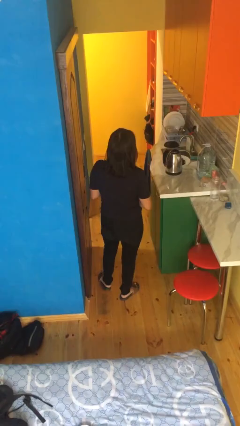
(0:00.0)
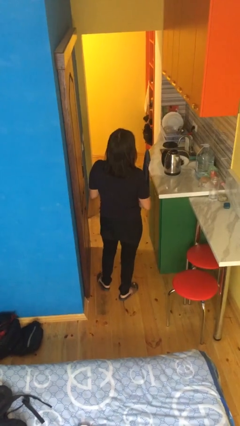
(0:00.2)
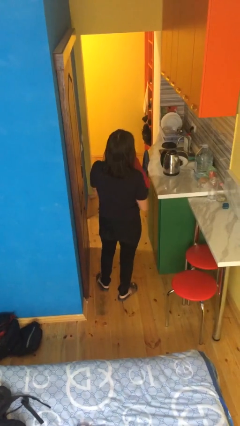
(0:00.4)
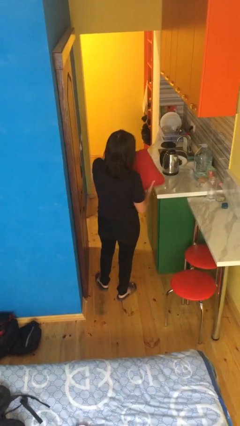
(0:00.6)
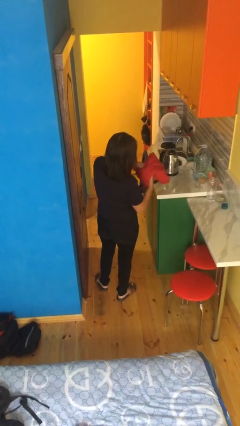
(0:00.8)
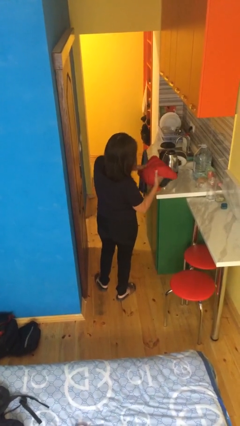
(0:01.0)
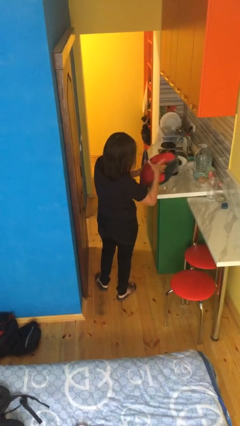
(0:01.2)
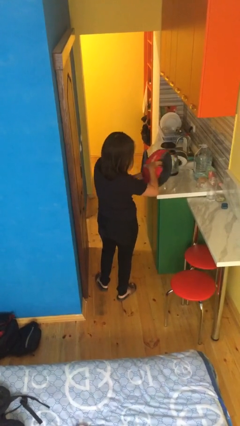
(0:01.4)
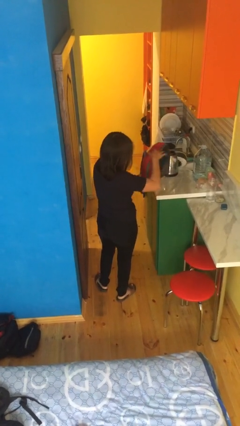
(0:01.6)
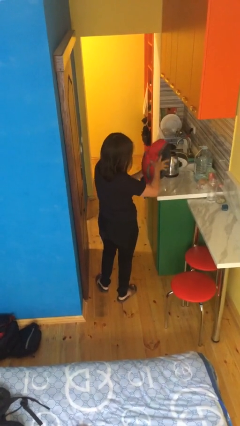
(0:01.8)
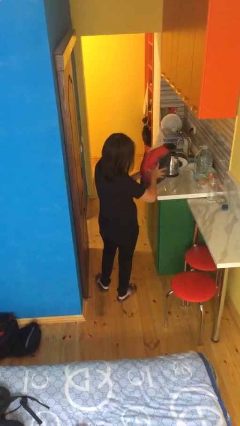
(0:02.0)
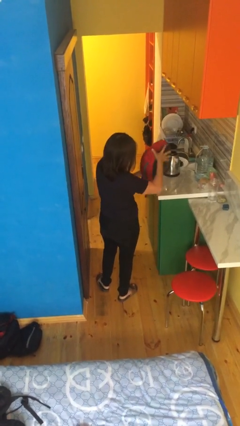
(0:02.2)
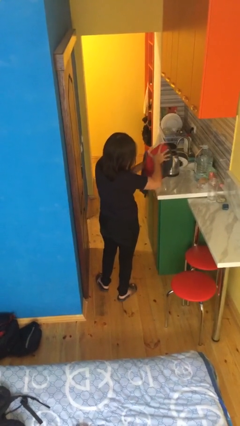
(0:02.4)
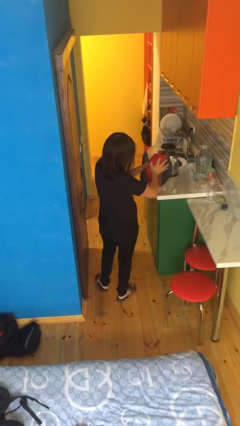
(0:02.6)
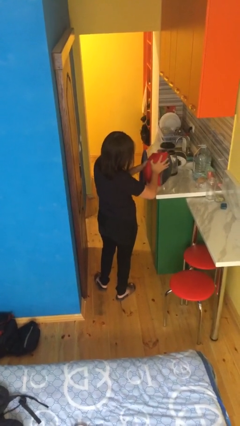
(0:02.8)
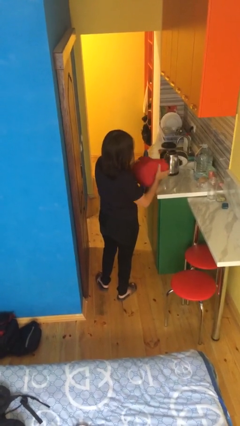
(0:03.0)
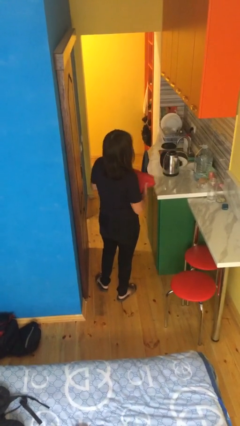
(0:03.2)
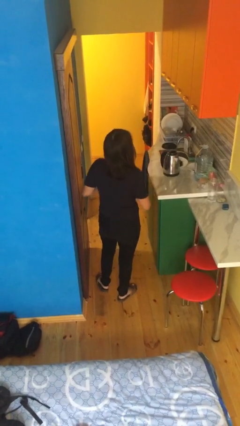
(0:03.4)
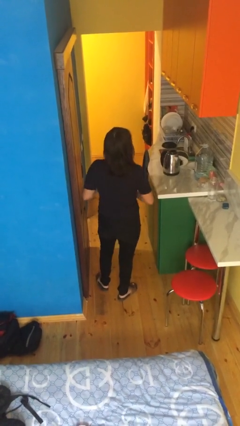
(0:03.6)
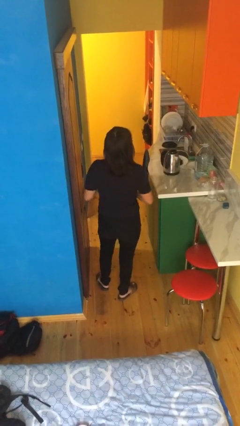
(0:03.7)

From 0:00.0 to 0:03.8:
person squeezes object

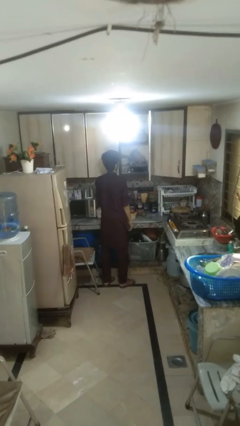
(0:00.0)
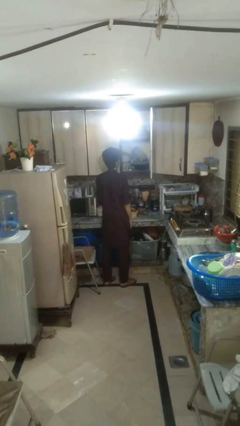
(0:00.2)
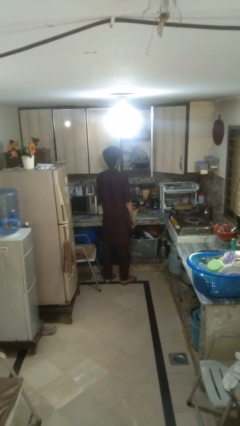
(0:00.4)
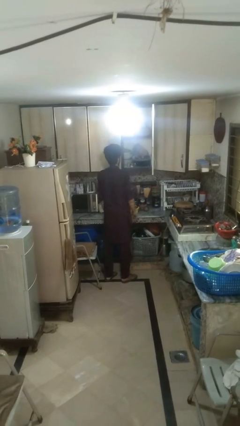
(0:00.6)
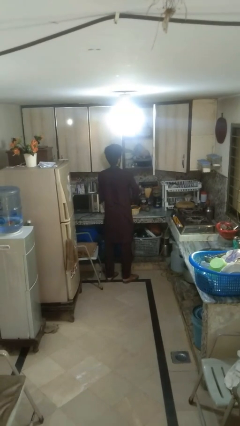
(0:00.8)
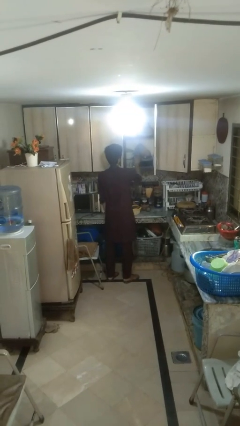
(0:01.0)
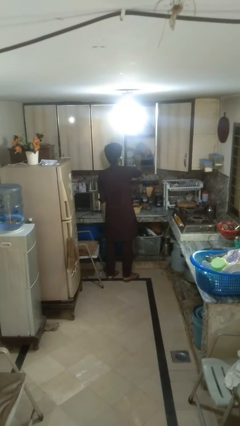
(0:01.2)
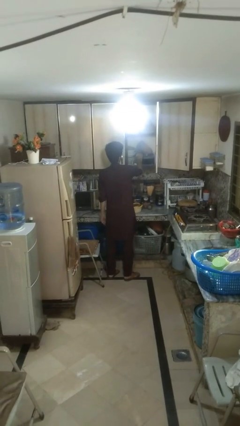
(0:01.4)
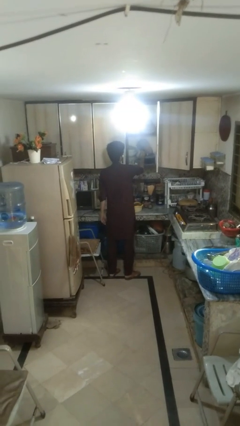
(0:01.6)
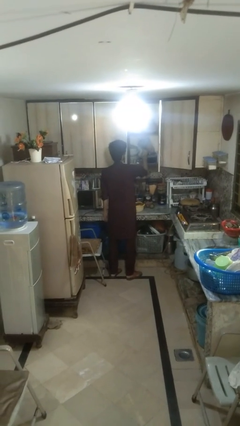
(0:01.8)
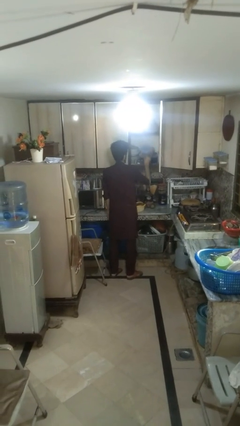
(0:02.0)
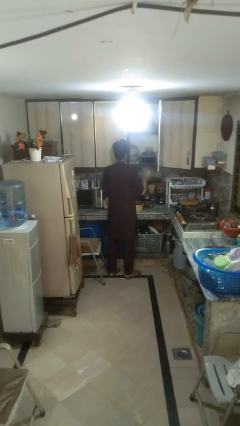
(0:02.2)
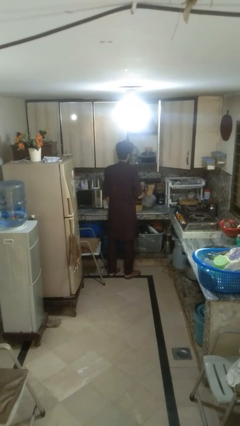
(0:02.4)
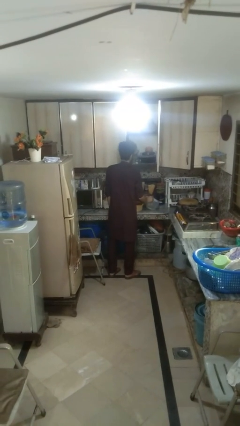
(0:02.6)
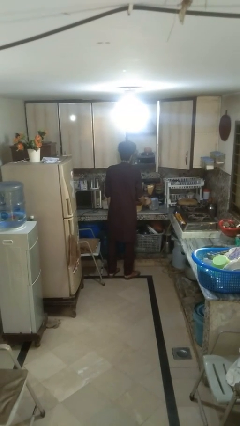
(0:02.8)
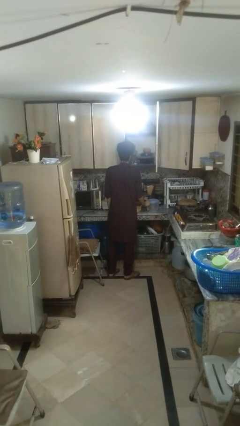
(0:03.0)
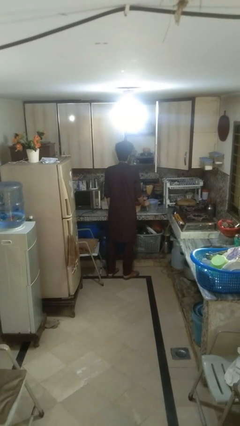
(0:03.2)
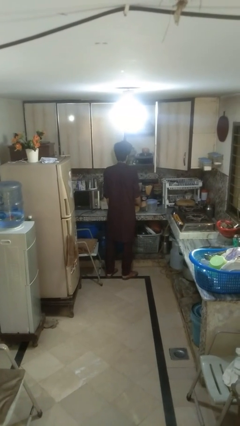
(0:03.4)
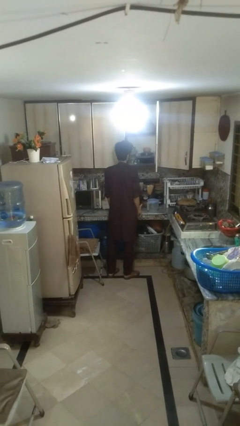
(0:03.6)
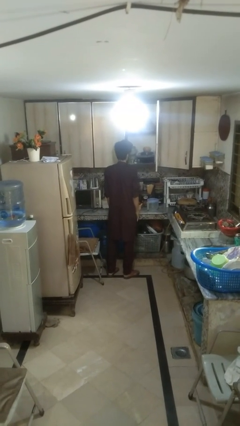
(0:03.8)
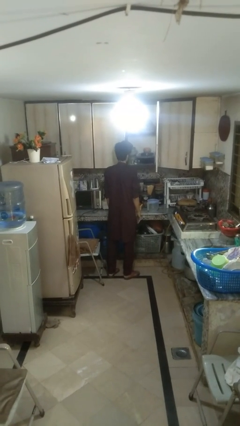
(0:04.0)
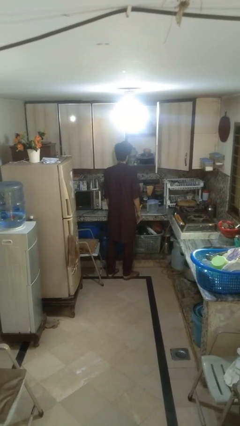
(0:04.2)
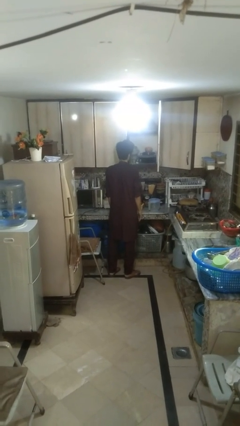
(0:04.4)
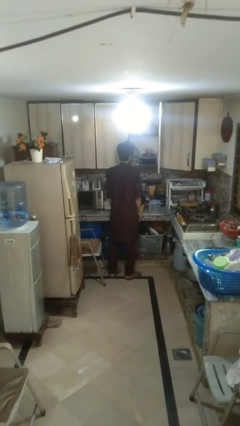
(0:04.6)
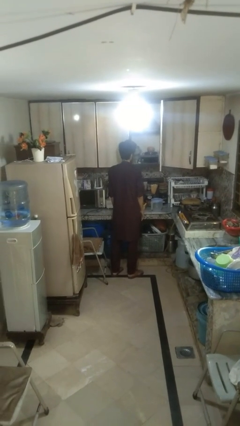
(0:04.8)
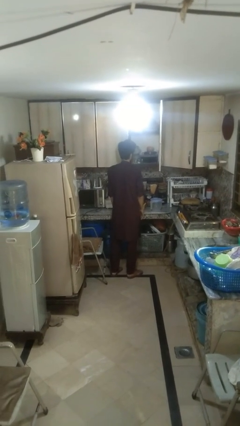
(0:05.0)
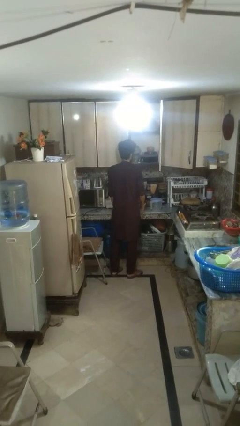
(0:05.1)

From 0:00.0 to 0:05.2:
person takes object from cabinet

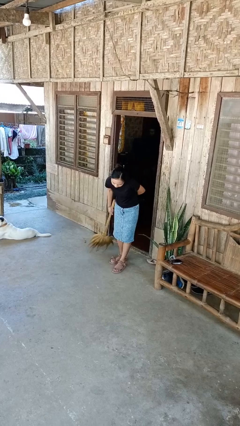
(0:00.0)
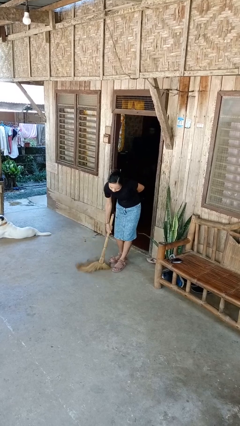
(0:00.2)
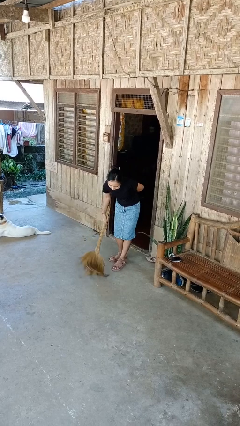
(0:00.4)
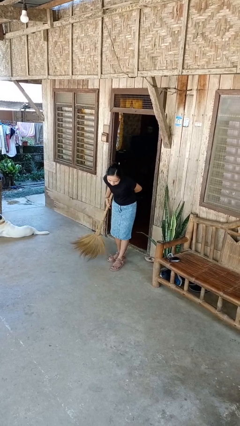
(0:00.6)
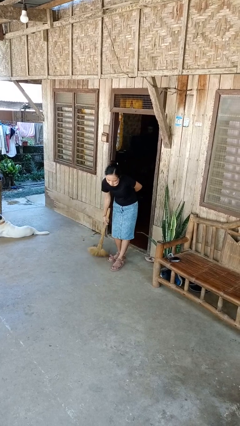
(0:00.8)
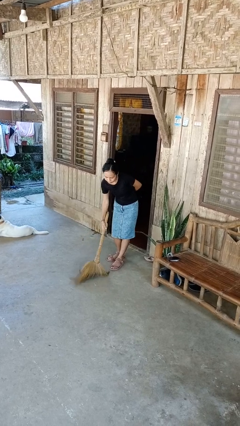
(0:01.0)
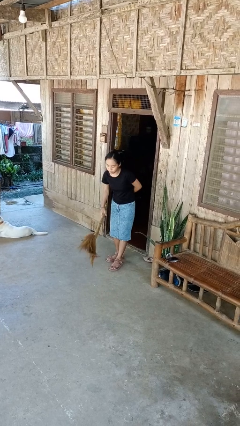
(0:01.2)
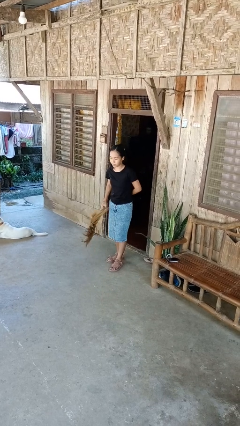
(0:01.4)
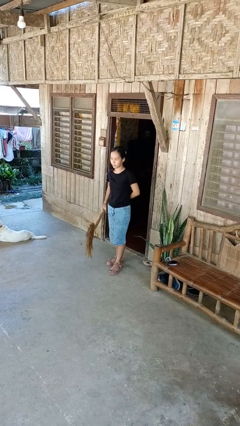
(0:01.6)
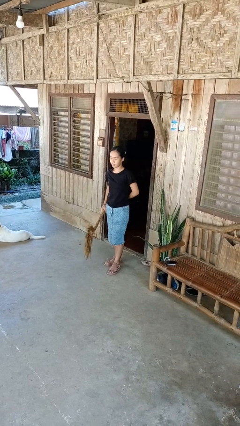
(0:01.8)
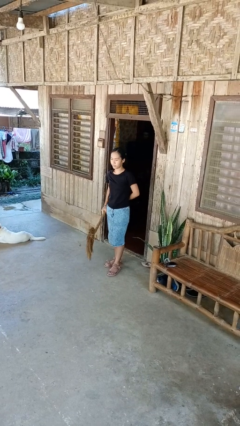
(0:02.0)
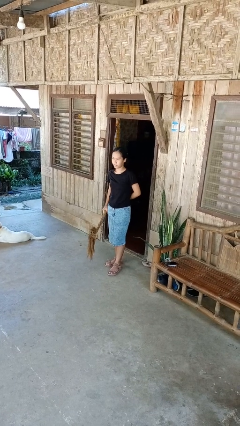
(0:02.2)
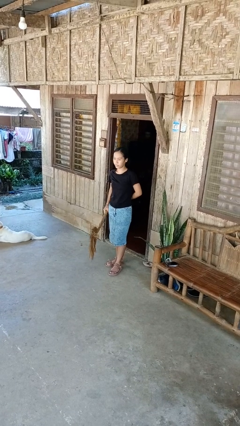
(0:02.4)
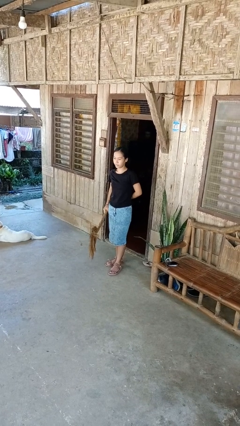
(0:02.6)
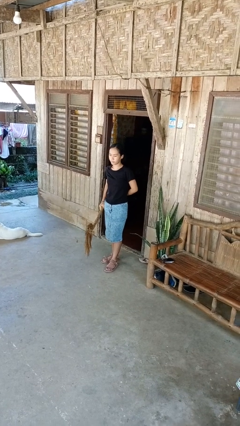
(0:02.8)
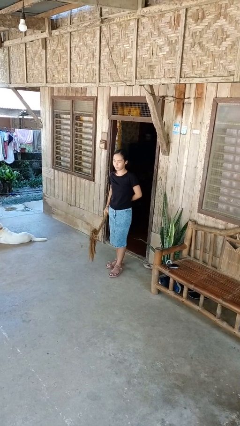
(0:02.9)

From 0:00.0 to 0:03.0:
person sweeps floor

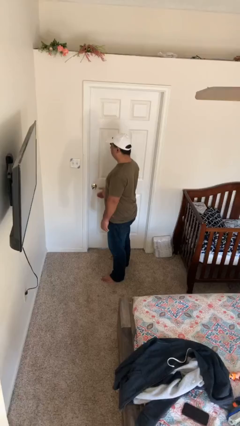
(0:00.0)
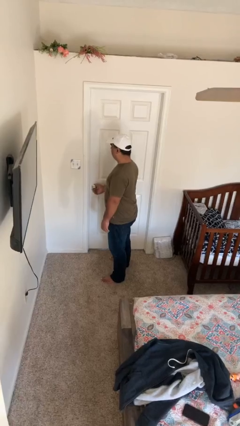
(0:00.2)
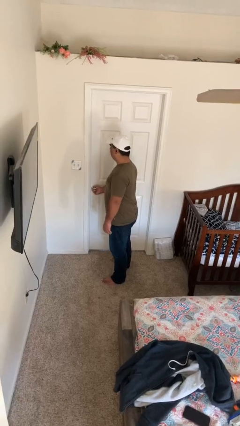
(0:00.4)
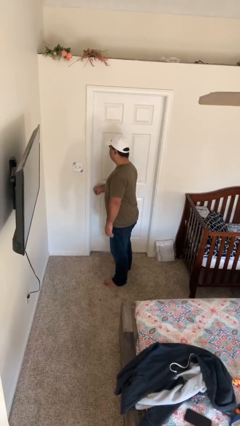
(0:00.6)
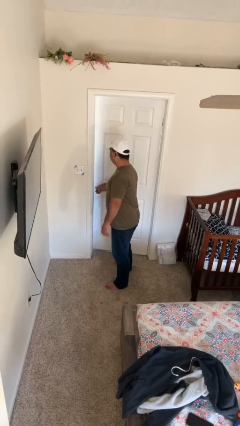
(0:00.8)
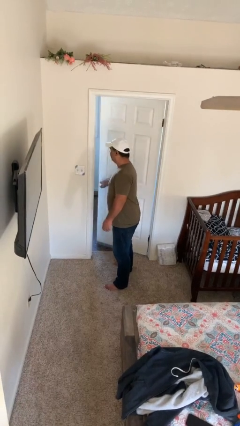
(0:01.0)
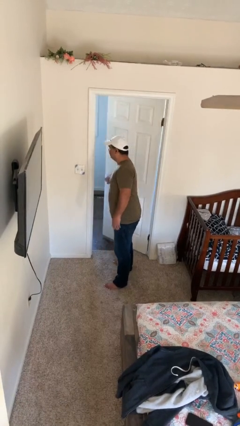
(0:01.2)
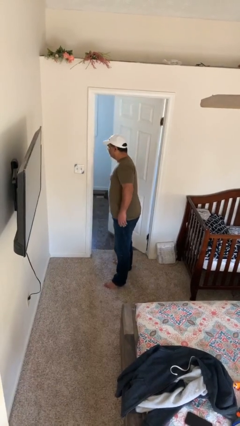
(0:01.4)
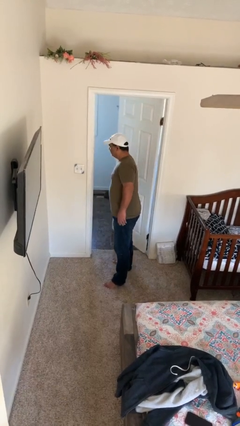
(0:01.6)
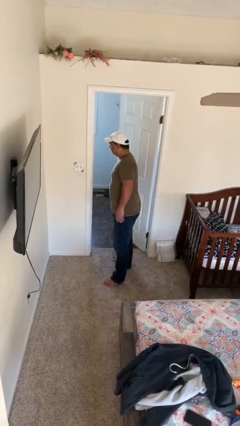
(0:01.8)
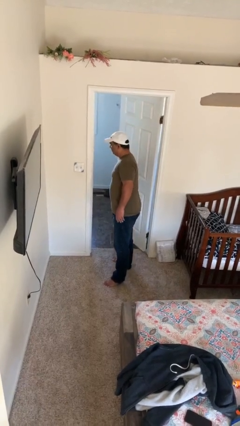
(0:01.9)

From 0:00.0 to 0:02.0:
person opens facility door

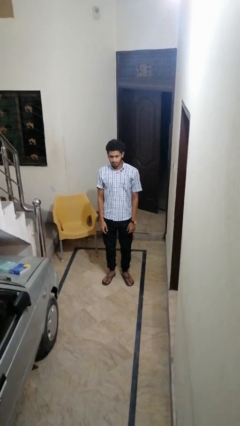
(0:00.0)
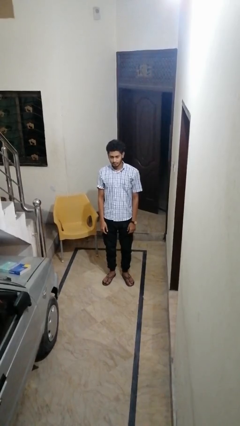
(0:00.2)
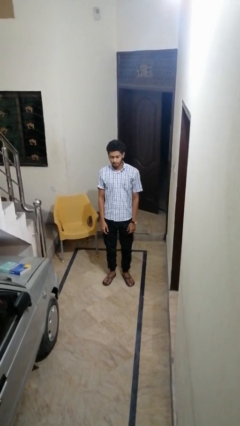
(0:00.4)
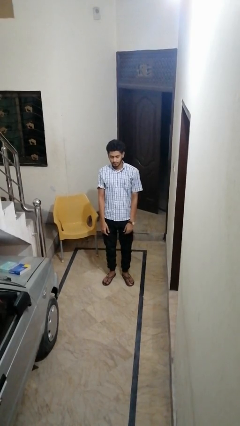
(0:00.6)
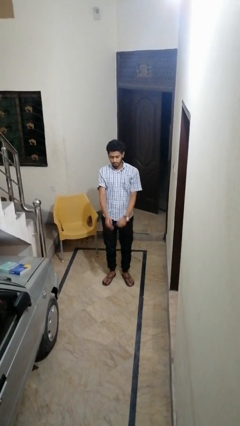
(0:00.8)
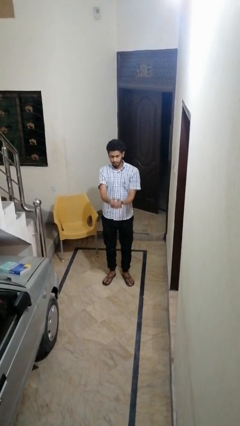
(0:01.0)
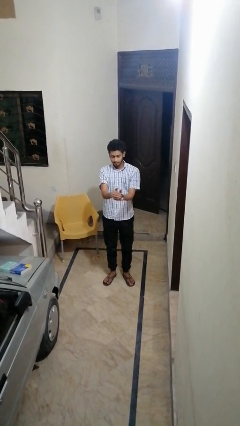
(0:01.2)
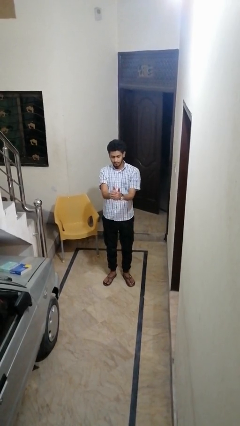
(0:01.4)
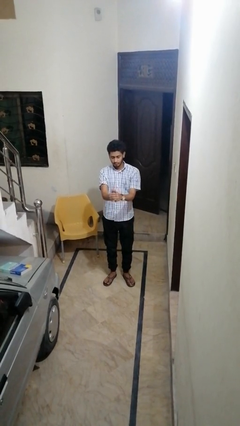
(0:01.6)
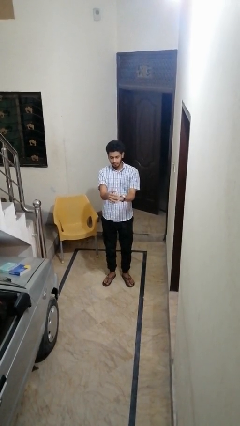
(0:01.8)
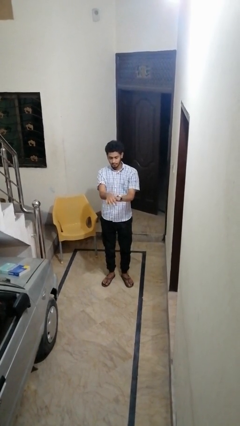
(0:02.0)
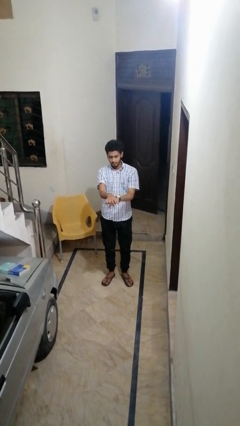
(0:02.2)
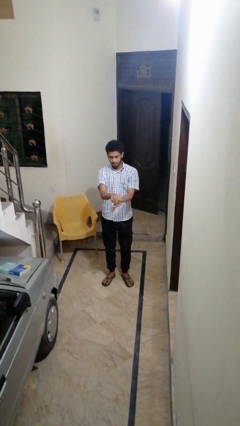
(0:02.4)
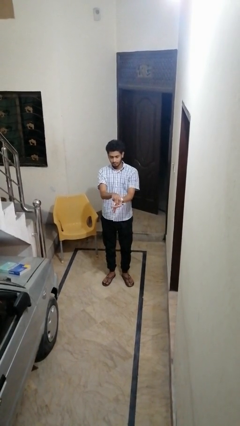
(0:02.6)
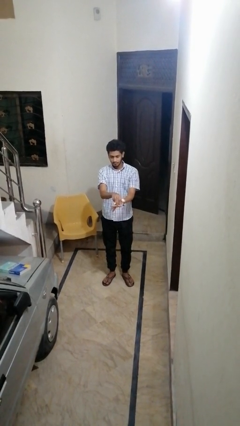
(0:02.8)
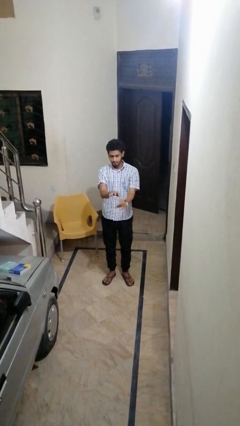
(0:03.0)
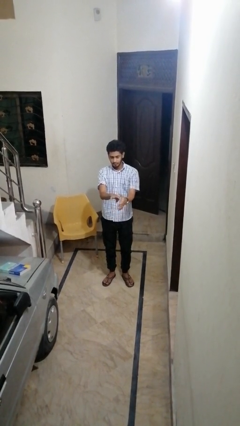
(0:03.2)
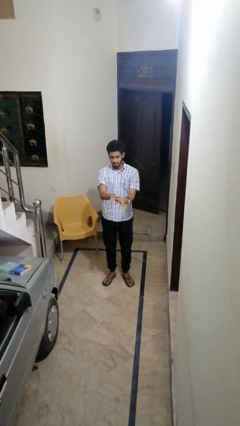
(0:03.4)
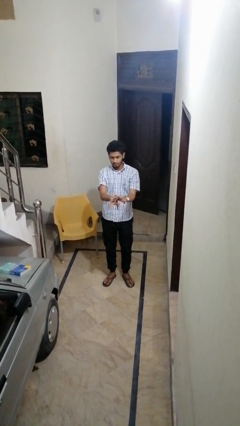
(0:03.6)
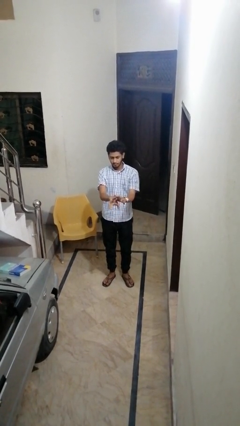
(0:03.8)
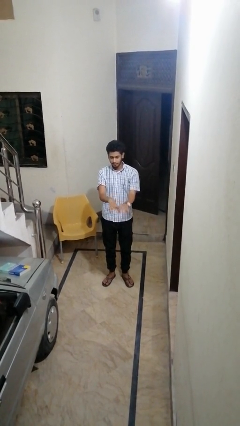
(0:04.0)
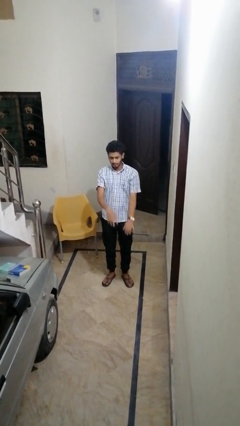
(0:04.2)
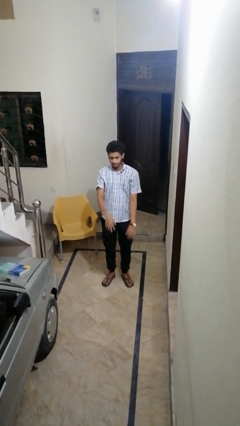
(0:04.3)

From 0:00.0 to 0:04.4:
person cracks knuckles
